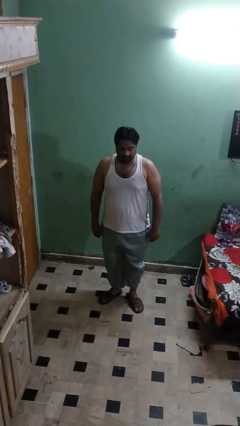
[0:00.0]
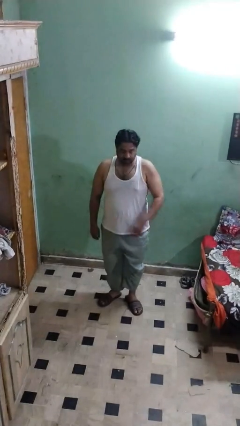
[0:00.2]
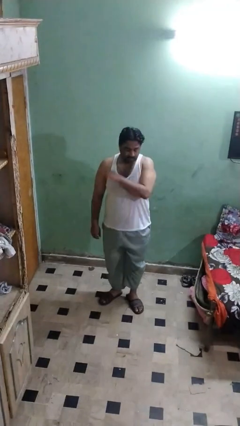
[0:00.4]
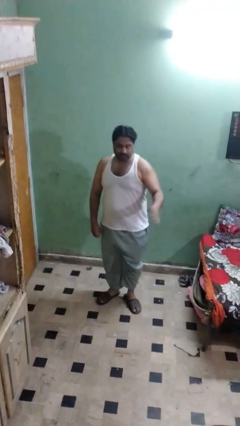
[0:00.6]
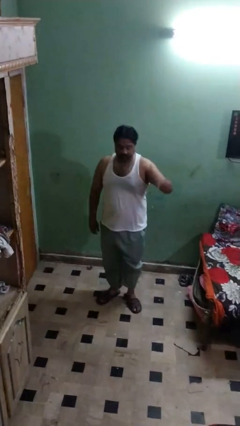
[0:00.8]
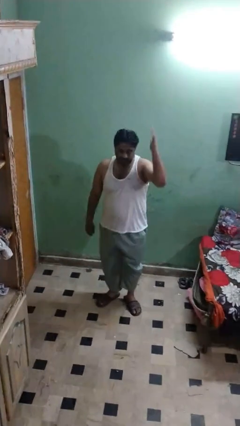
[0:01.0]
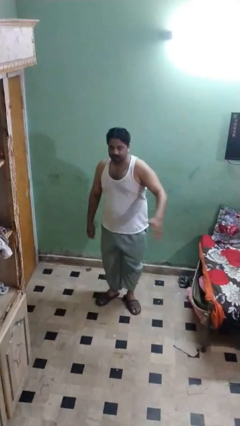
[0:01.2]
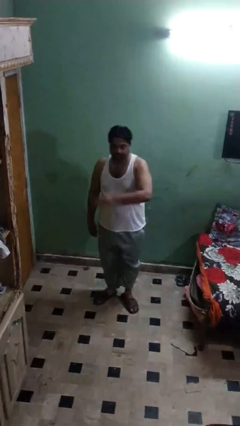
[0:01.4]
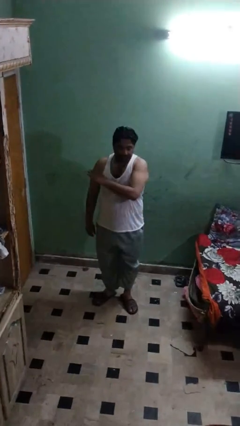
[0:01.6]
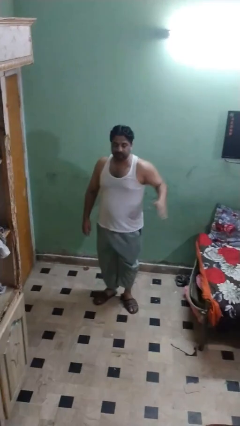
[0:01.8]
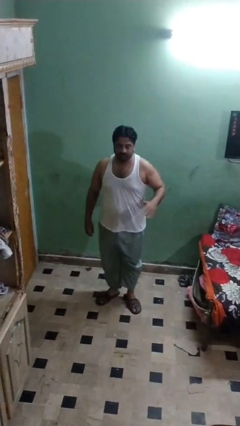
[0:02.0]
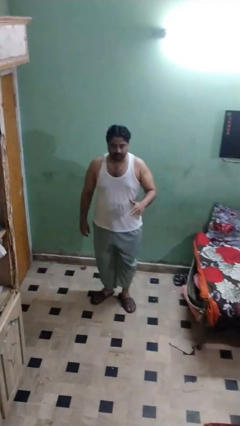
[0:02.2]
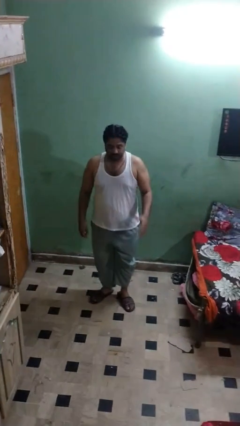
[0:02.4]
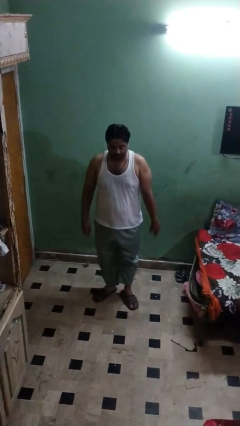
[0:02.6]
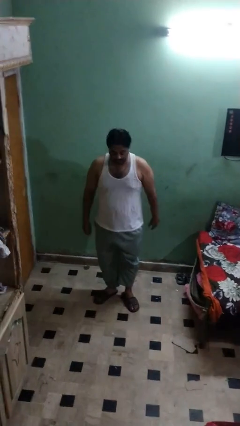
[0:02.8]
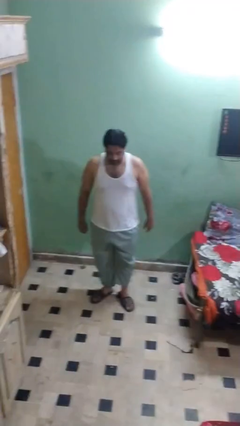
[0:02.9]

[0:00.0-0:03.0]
person karate chop

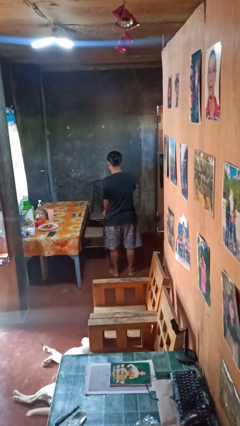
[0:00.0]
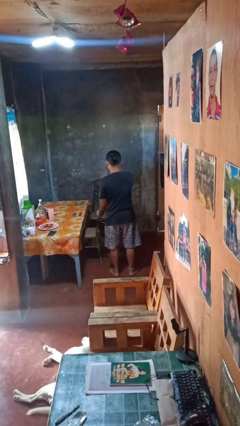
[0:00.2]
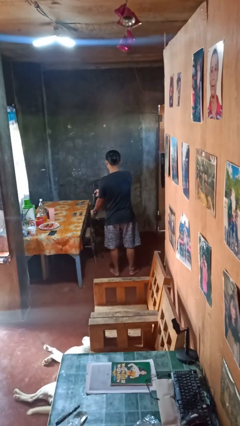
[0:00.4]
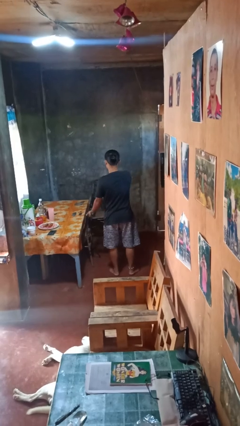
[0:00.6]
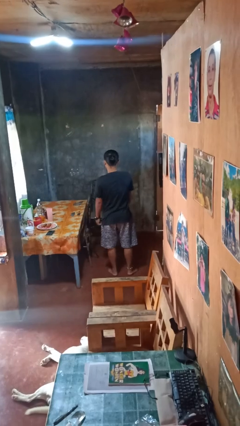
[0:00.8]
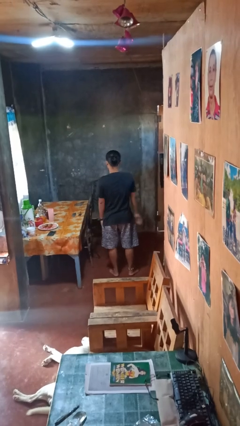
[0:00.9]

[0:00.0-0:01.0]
person pushes in chair

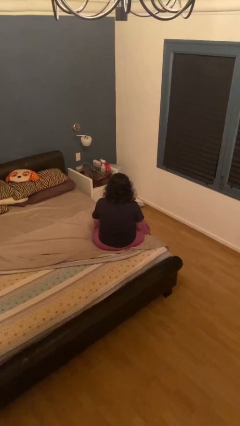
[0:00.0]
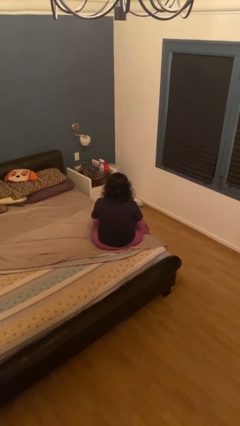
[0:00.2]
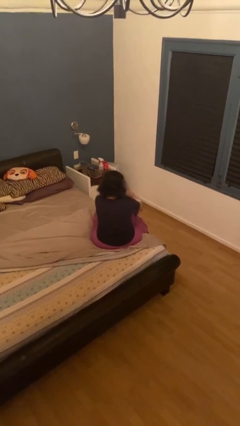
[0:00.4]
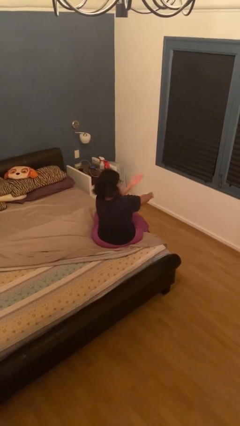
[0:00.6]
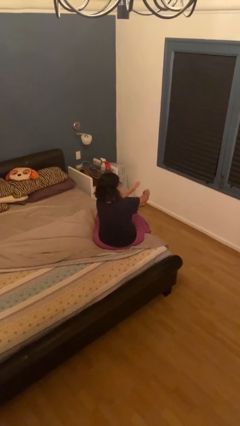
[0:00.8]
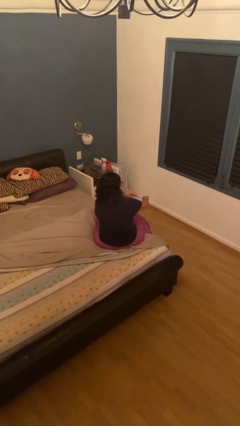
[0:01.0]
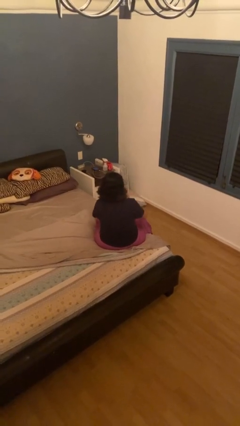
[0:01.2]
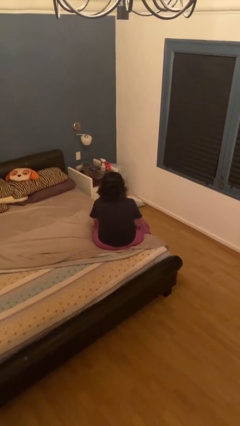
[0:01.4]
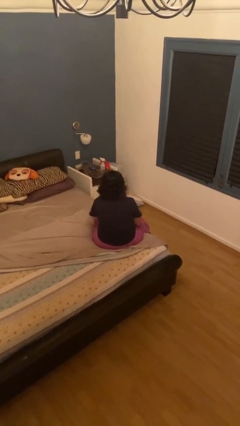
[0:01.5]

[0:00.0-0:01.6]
person swats bug

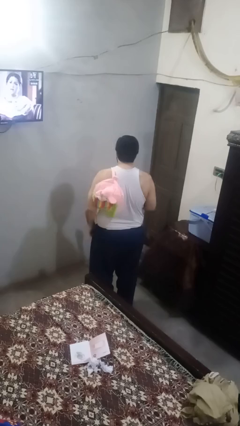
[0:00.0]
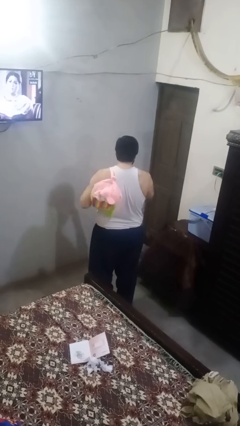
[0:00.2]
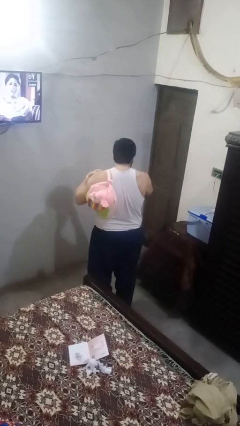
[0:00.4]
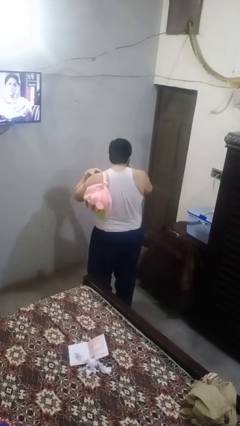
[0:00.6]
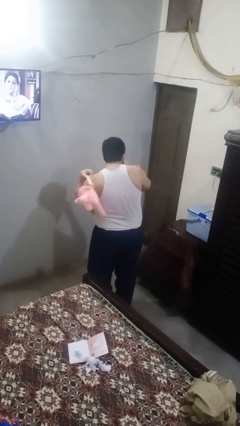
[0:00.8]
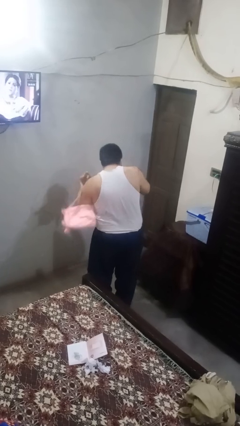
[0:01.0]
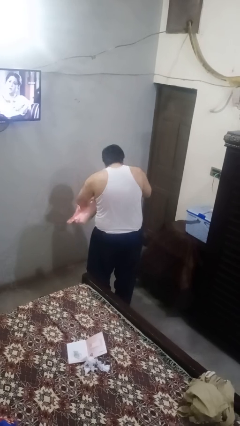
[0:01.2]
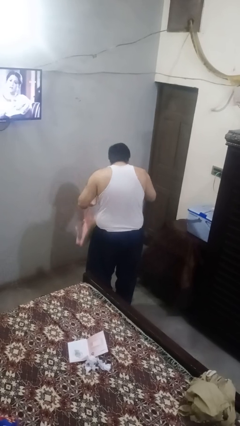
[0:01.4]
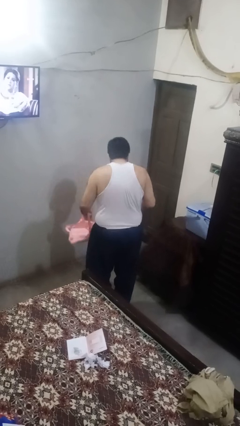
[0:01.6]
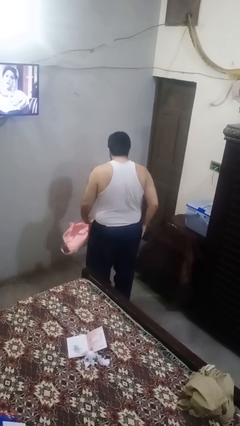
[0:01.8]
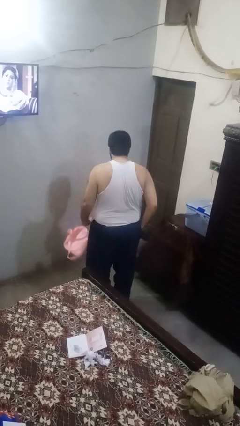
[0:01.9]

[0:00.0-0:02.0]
person takes off backpack

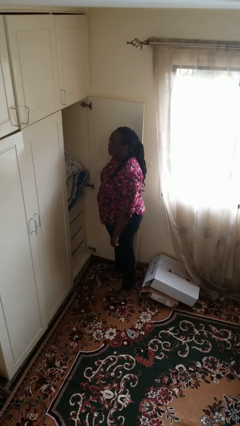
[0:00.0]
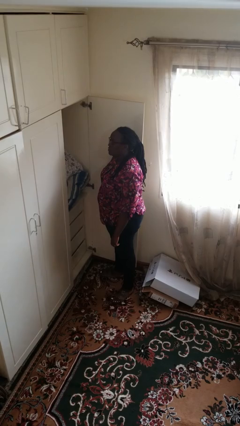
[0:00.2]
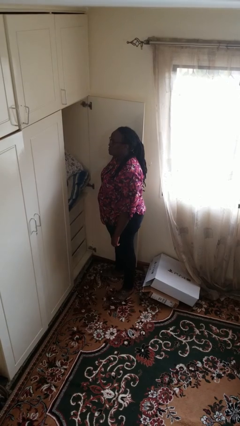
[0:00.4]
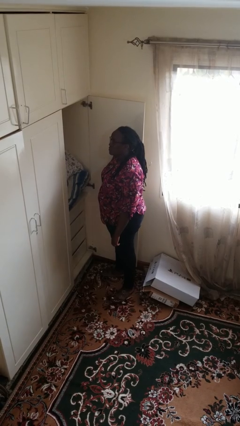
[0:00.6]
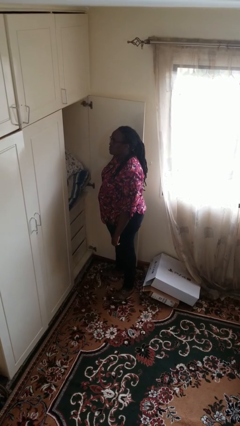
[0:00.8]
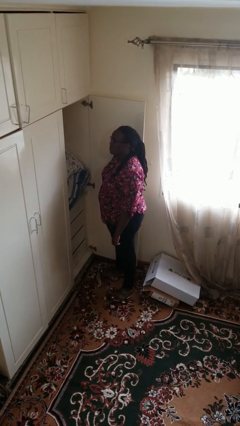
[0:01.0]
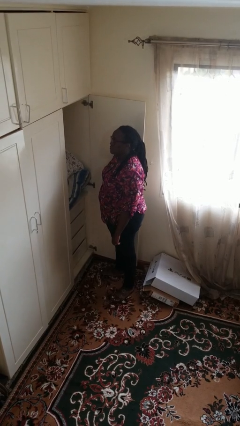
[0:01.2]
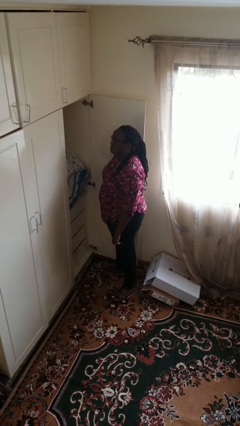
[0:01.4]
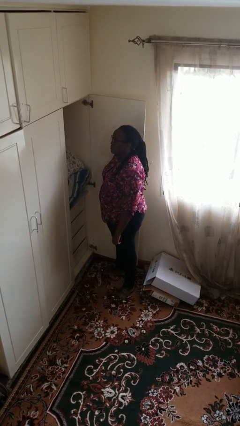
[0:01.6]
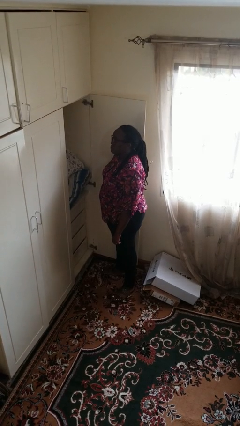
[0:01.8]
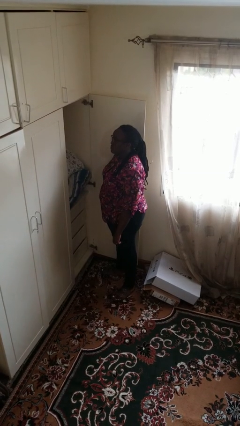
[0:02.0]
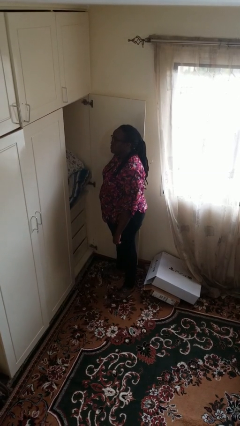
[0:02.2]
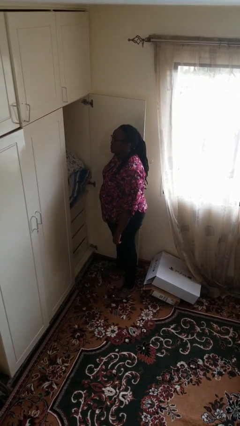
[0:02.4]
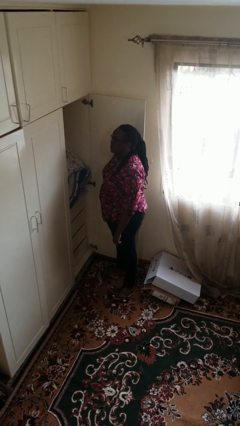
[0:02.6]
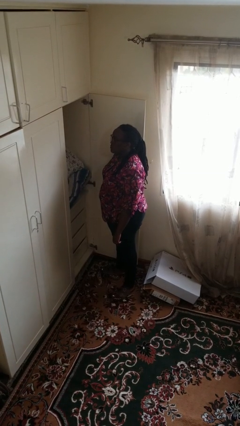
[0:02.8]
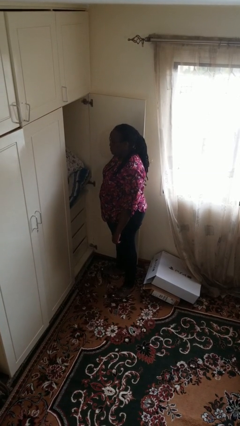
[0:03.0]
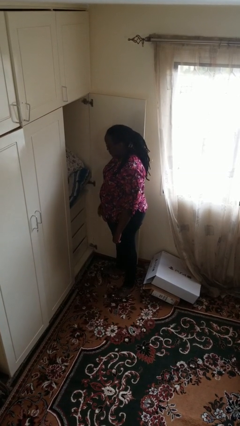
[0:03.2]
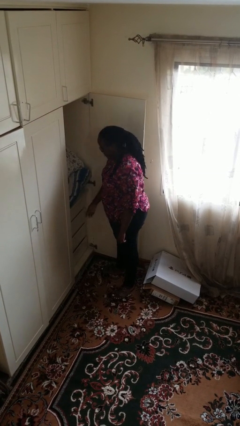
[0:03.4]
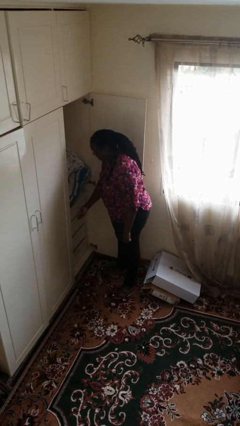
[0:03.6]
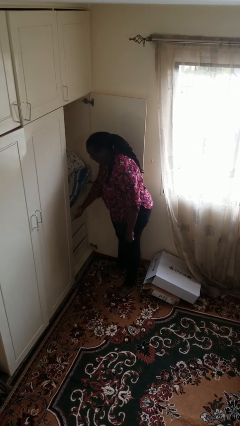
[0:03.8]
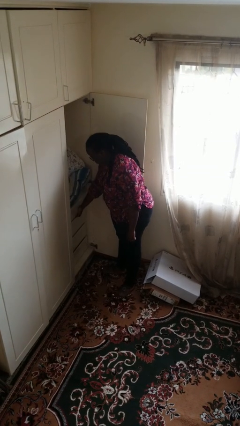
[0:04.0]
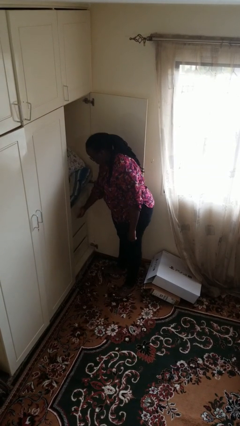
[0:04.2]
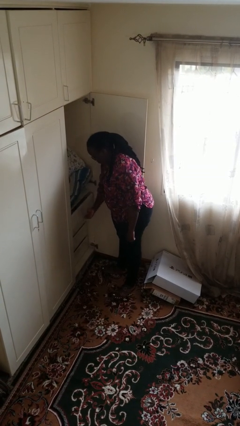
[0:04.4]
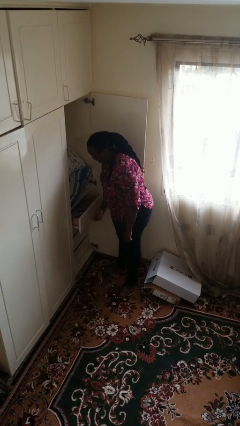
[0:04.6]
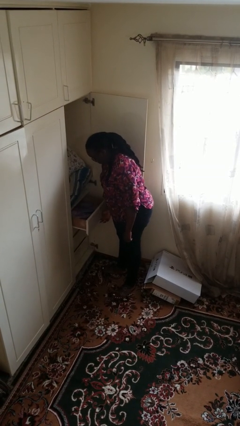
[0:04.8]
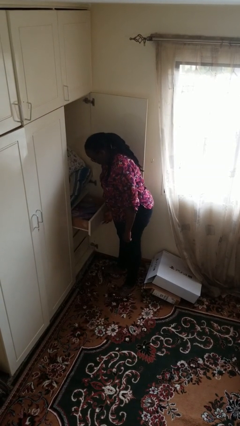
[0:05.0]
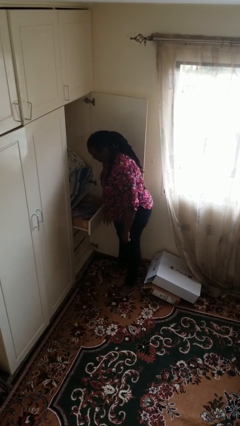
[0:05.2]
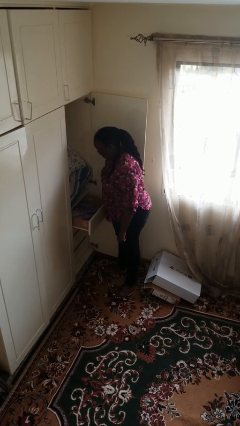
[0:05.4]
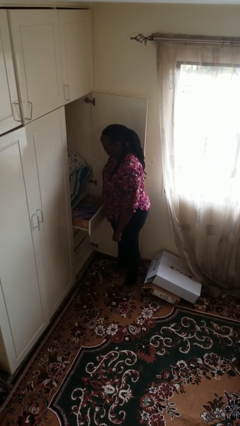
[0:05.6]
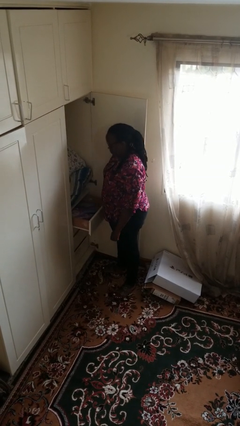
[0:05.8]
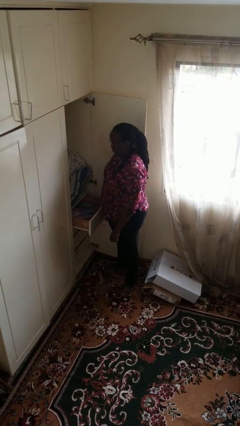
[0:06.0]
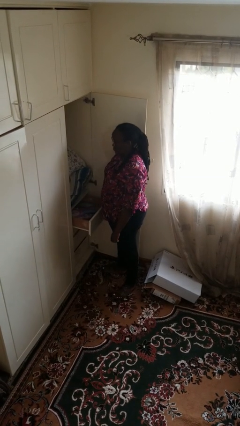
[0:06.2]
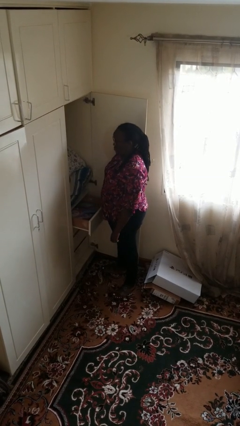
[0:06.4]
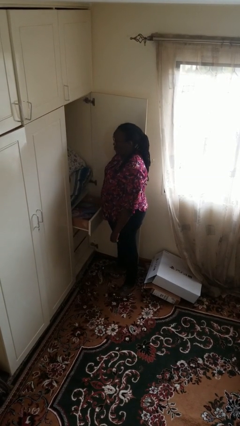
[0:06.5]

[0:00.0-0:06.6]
person opens dresser drawer

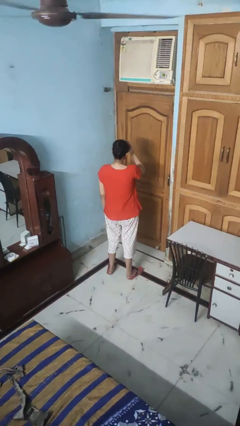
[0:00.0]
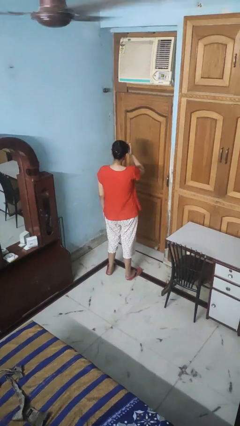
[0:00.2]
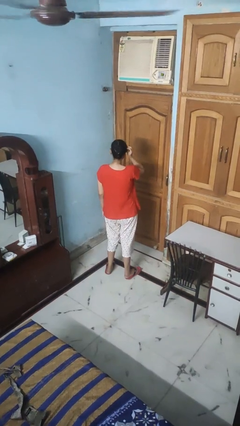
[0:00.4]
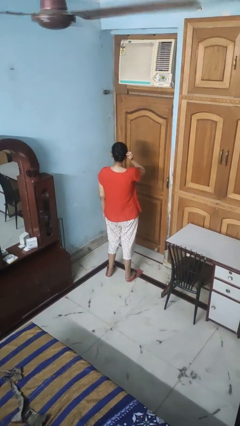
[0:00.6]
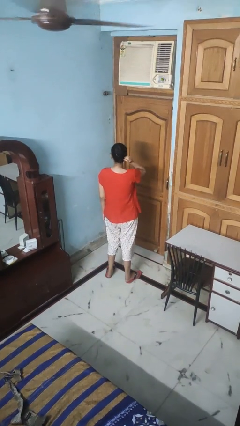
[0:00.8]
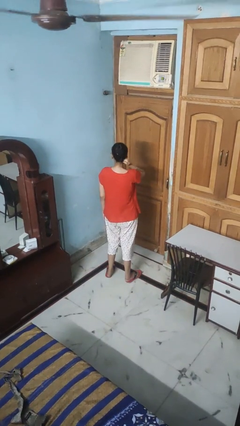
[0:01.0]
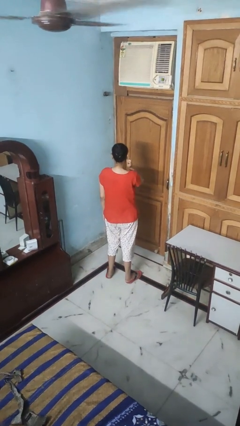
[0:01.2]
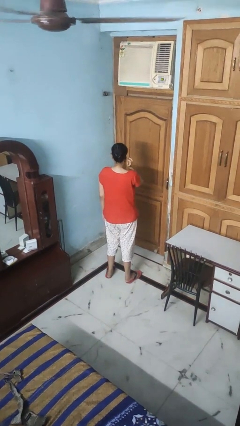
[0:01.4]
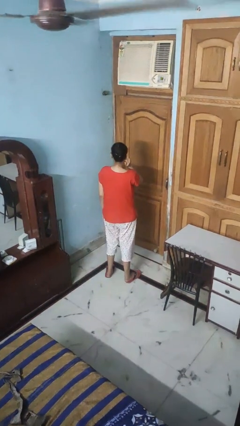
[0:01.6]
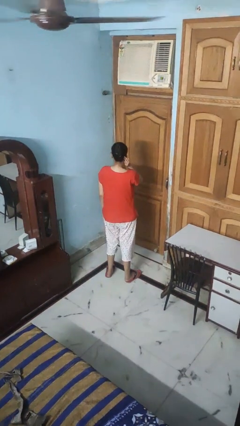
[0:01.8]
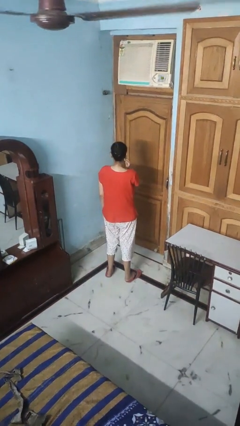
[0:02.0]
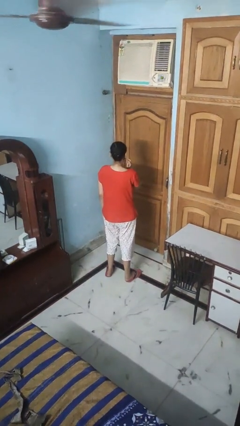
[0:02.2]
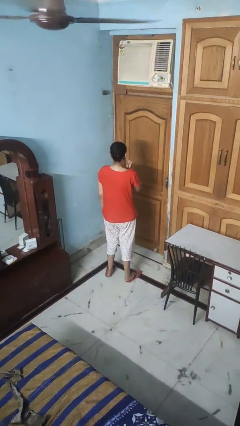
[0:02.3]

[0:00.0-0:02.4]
person strokes hair

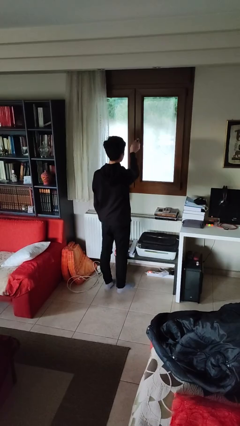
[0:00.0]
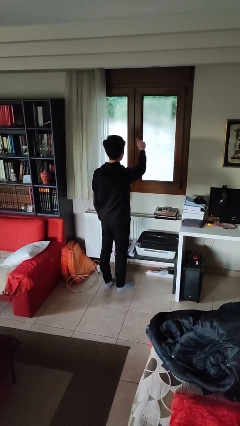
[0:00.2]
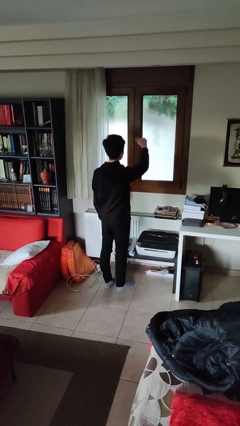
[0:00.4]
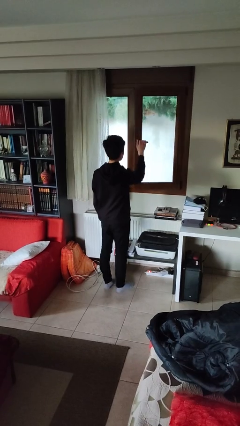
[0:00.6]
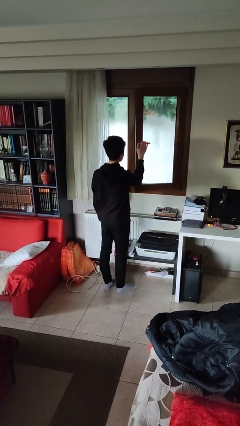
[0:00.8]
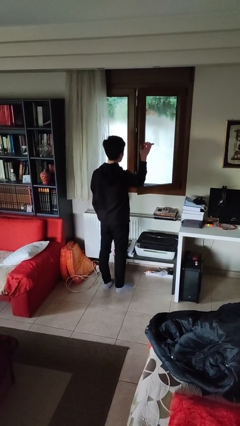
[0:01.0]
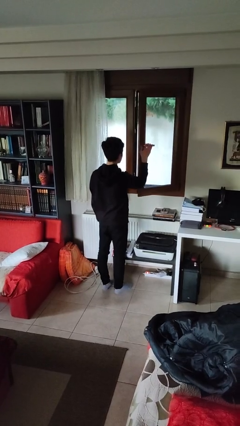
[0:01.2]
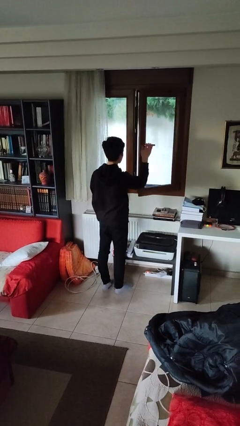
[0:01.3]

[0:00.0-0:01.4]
person opens home window
